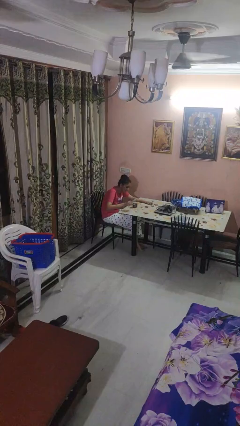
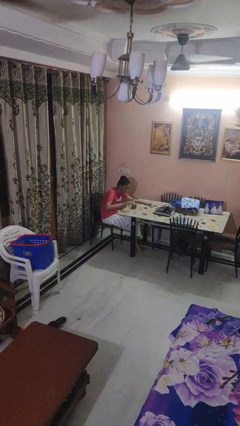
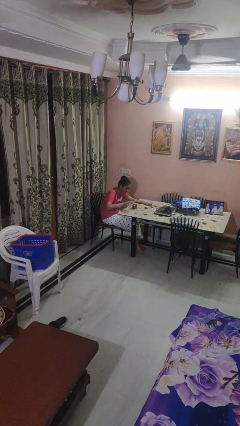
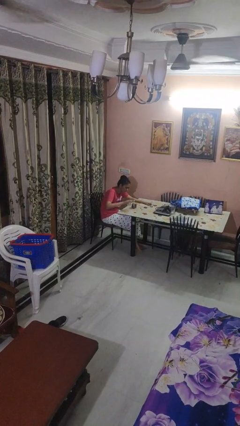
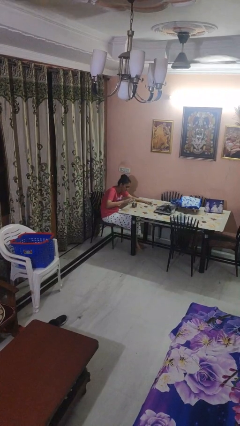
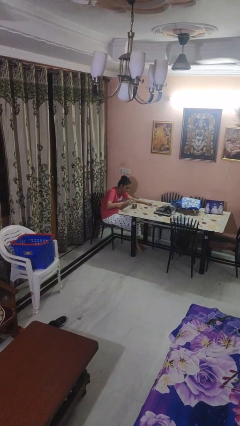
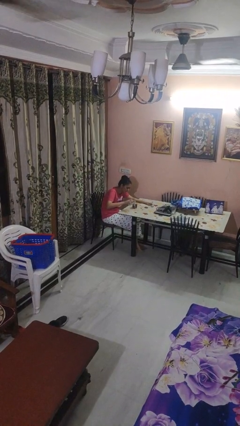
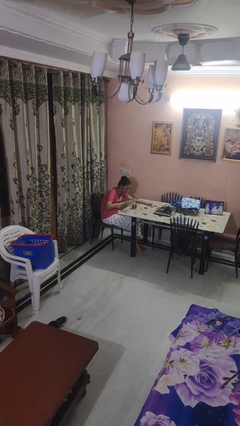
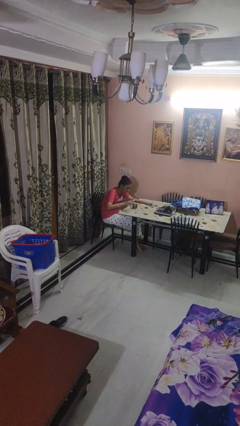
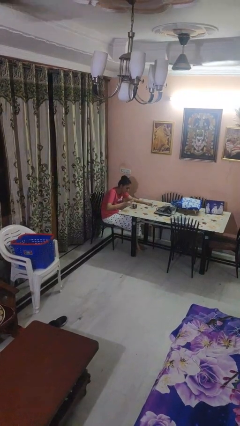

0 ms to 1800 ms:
person pours liquid into cup

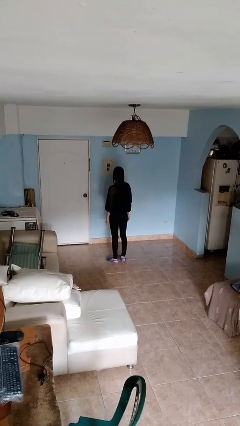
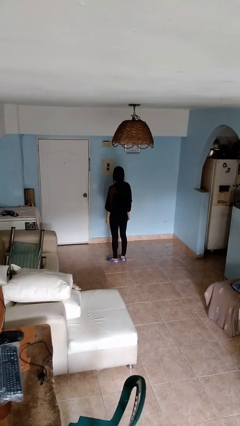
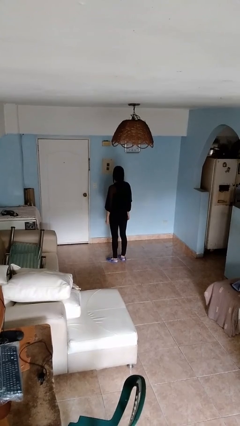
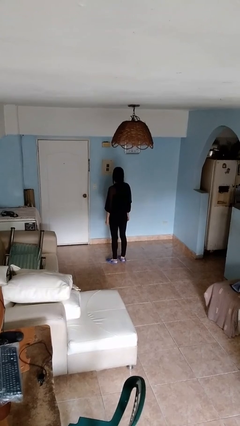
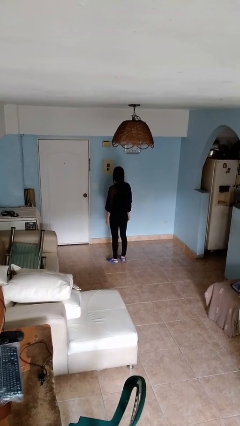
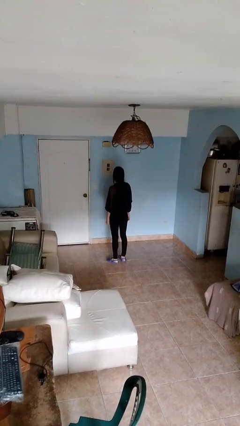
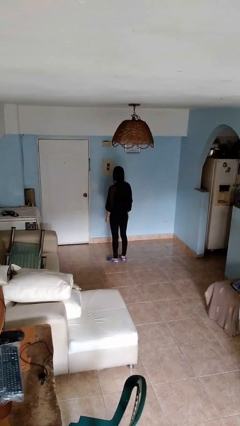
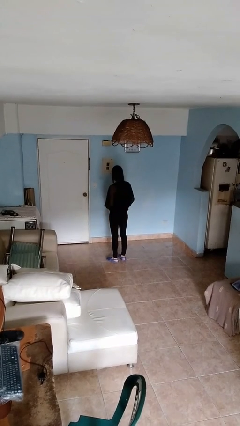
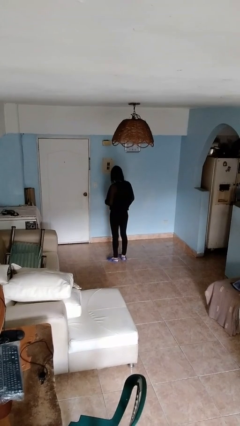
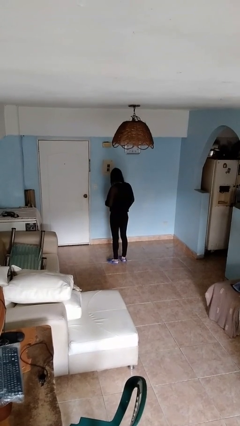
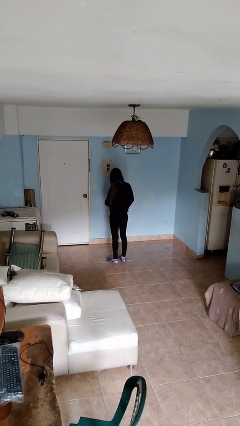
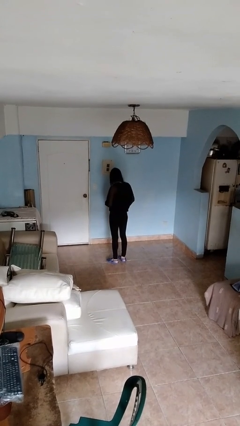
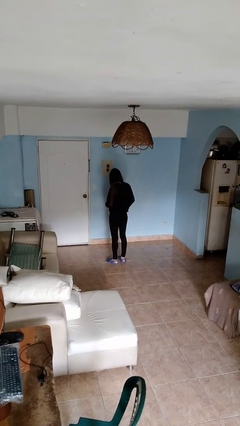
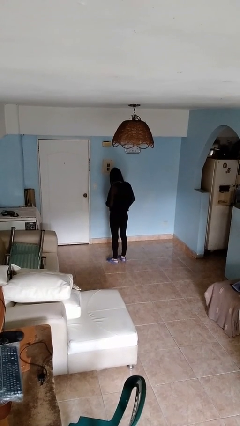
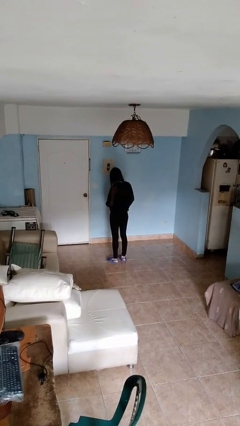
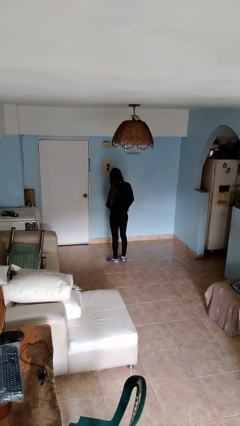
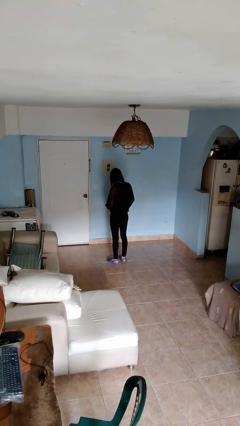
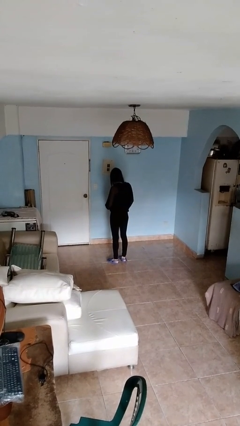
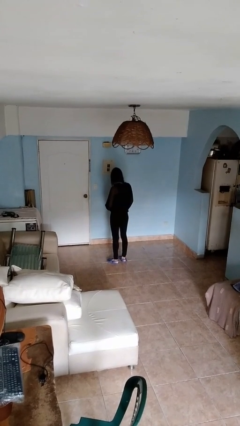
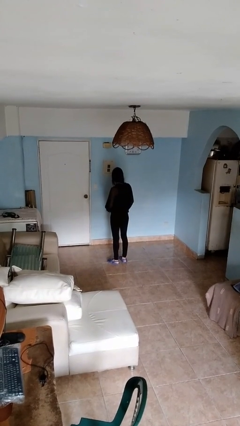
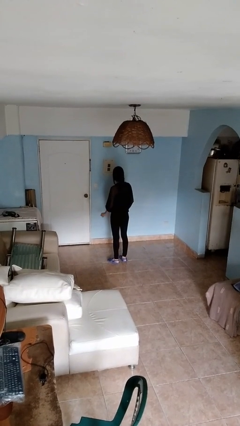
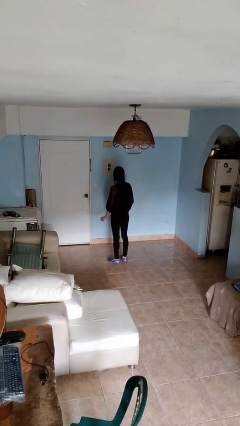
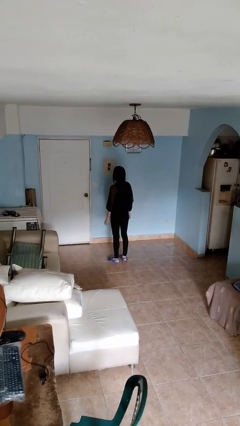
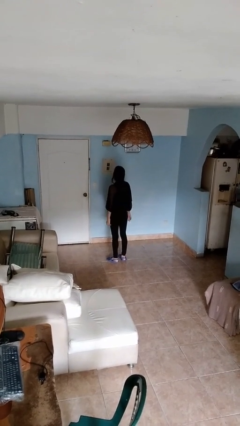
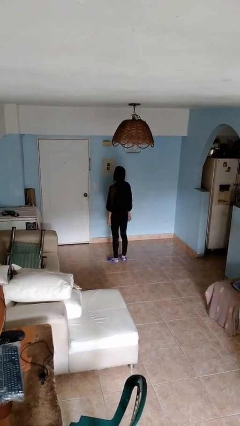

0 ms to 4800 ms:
person buttons shirt

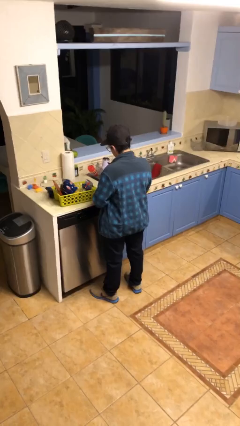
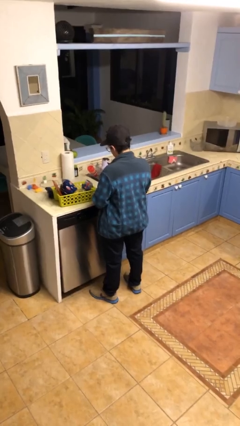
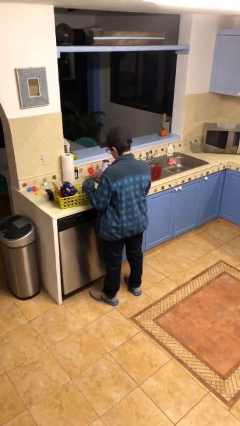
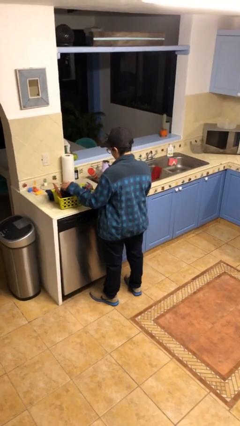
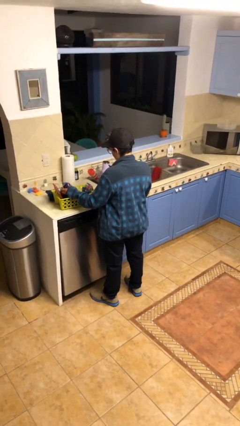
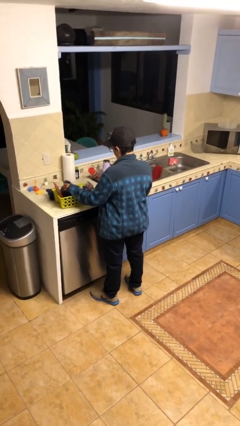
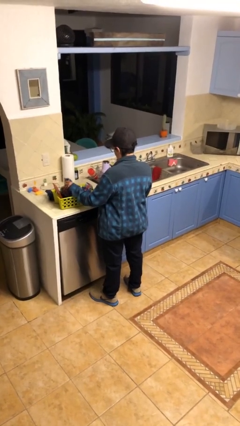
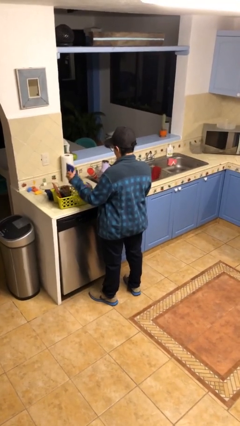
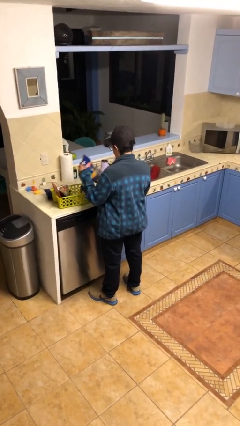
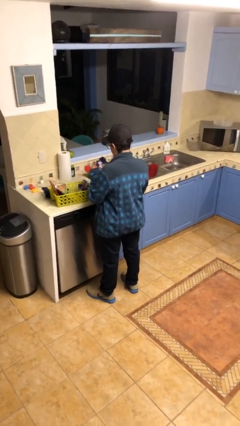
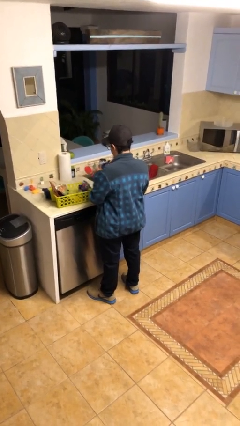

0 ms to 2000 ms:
person takes object from basket

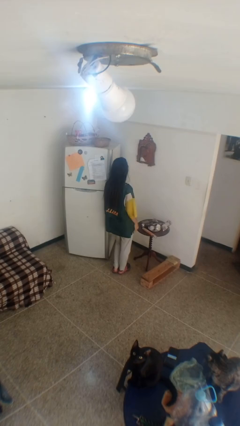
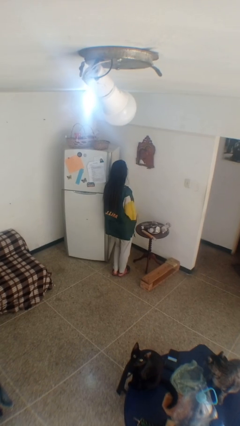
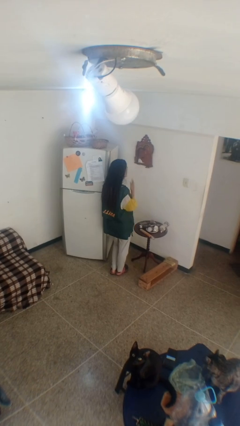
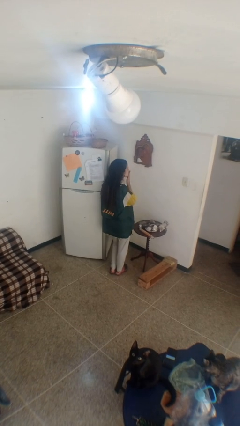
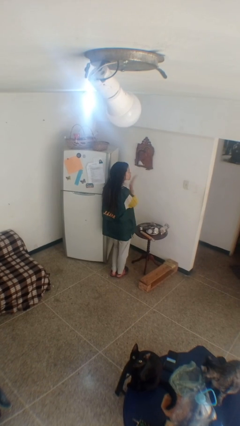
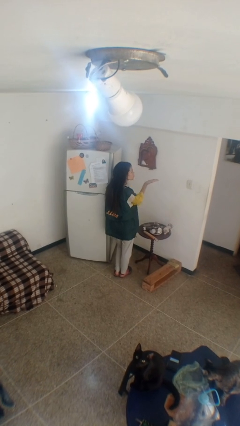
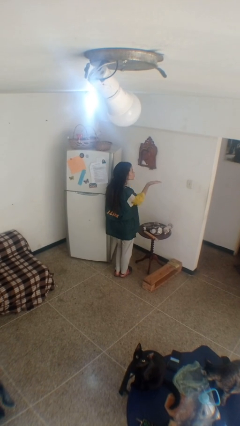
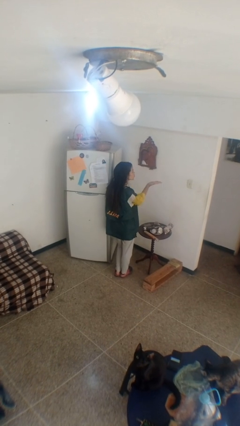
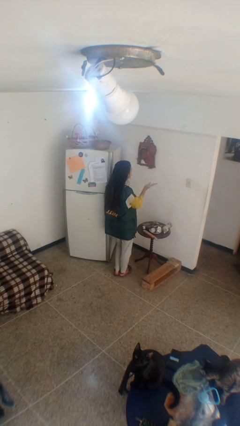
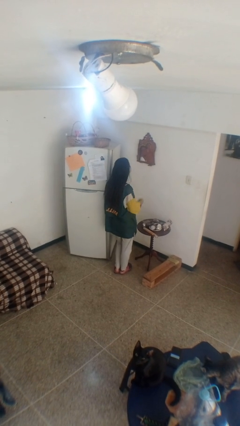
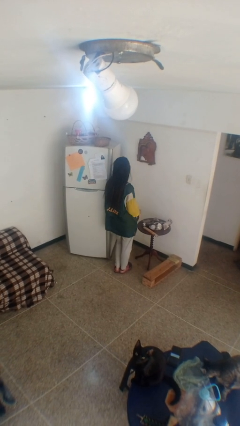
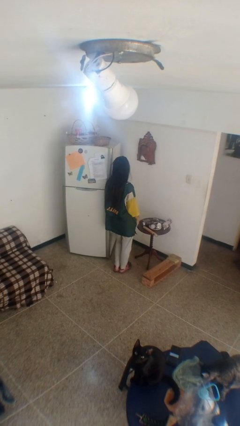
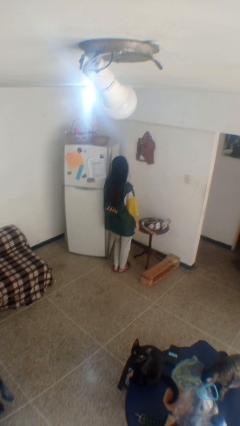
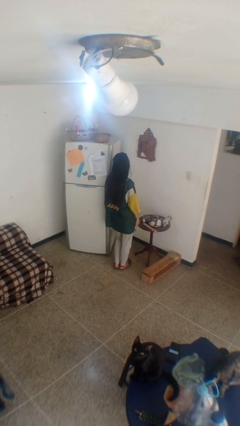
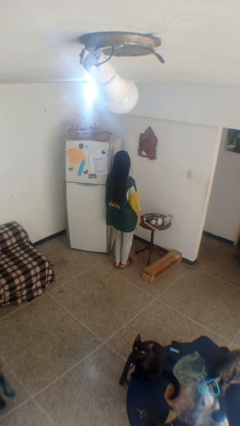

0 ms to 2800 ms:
person gestures blow kiss

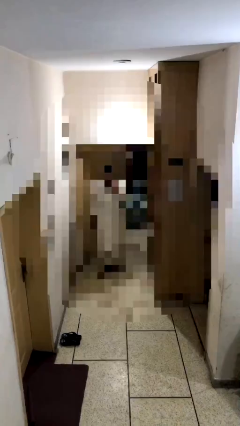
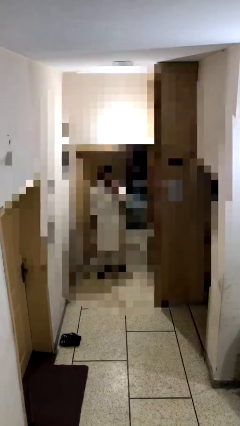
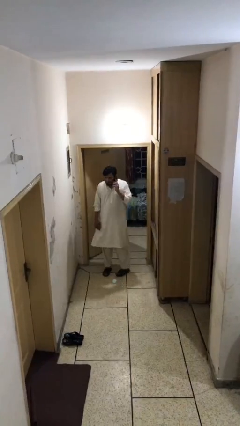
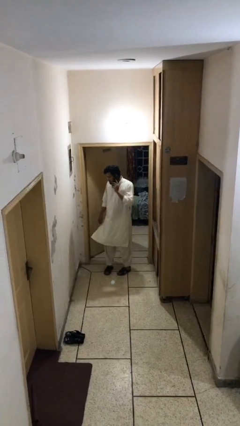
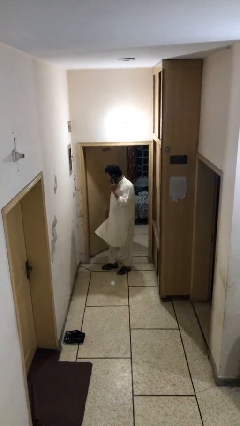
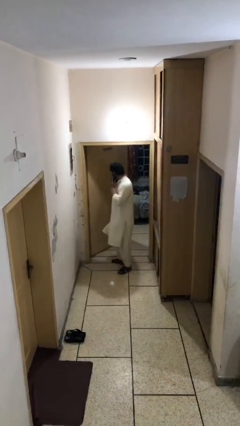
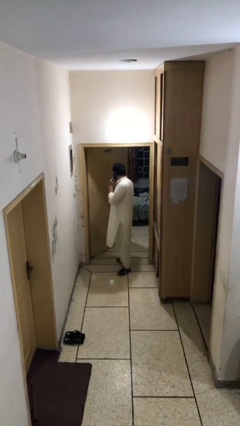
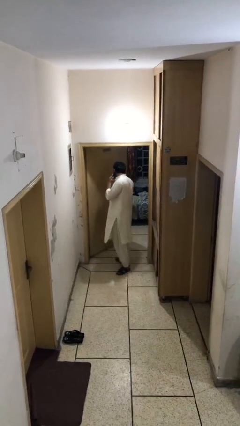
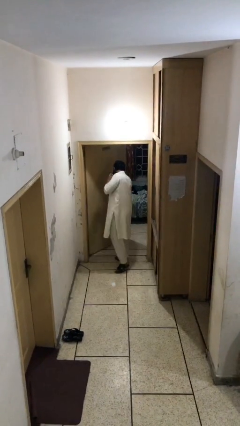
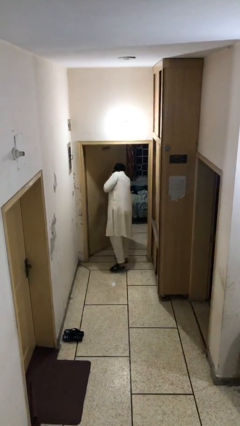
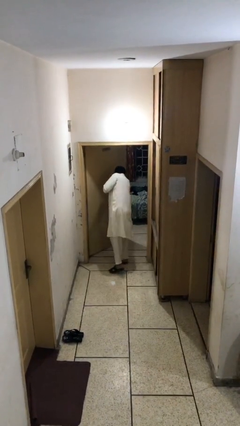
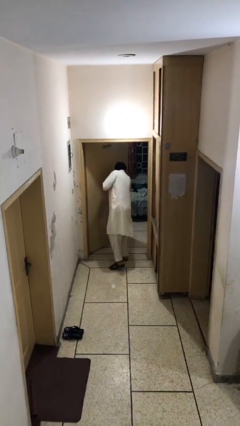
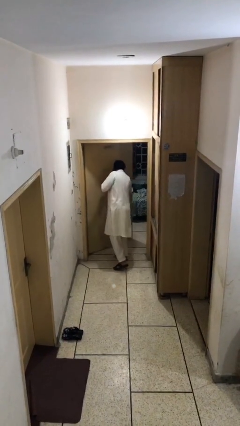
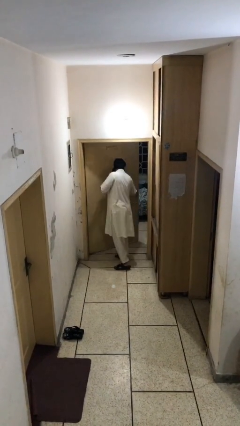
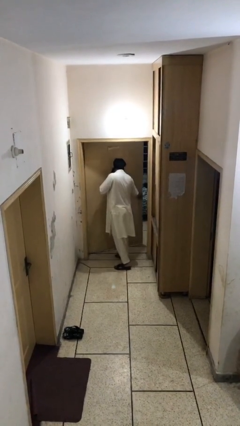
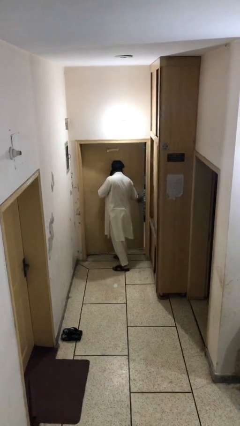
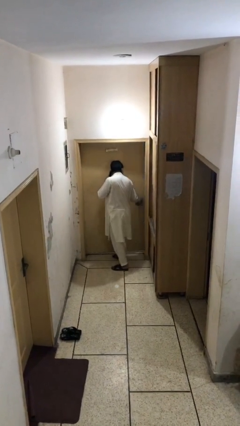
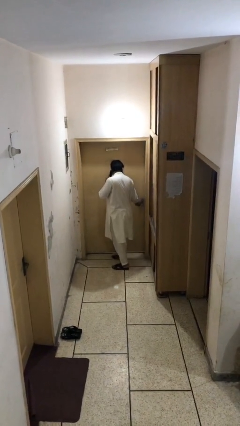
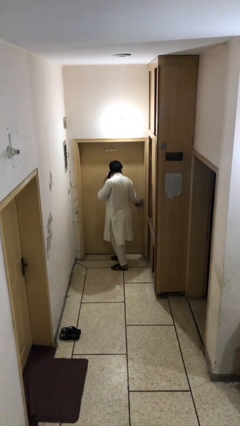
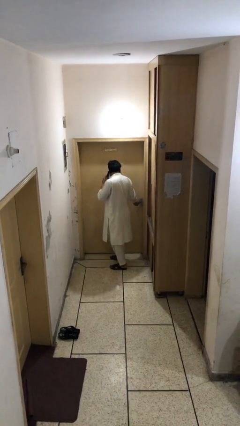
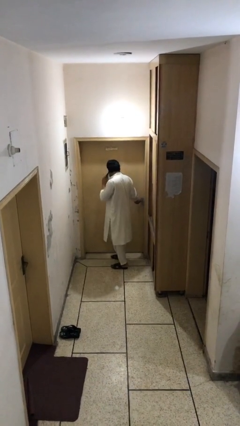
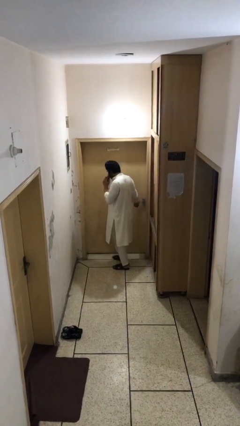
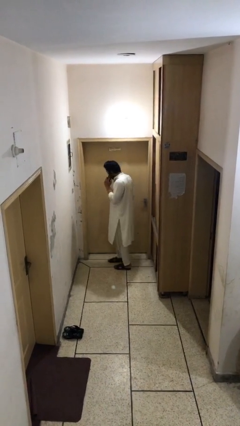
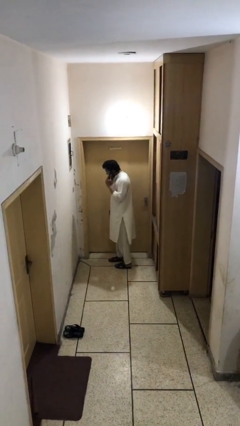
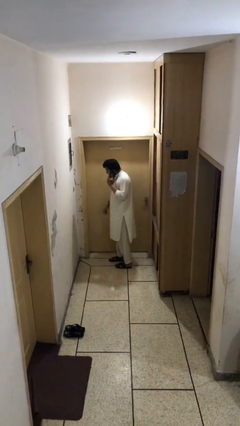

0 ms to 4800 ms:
person closes facility door

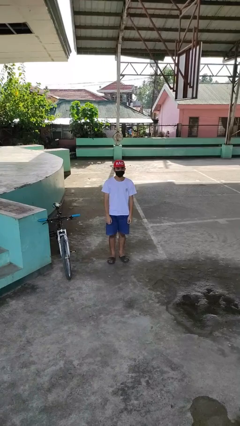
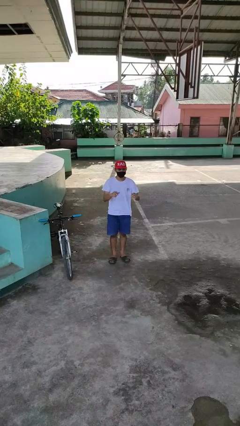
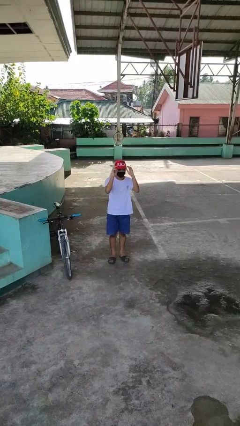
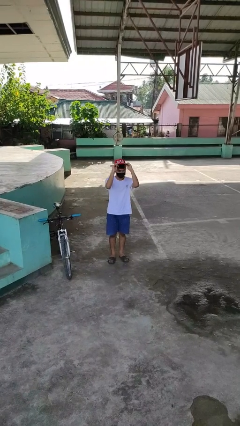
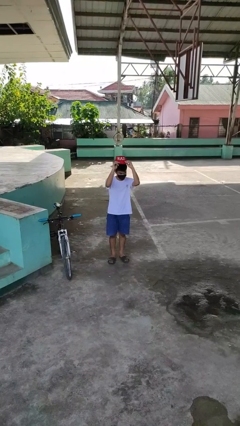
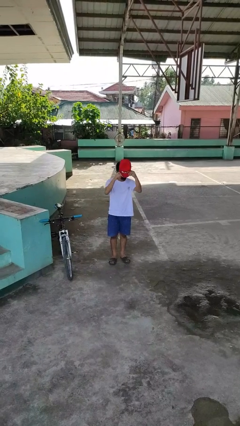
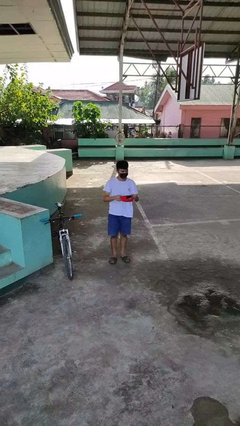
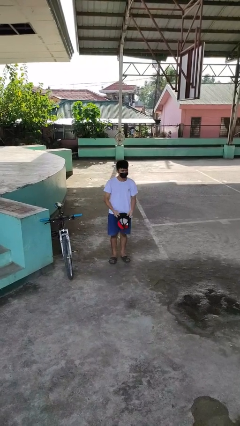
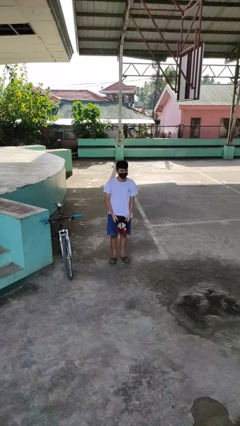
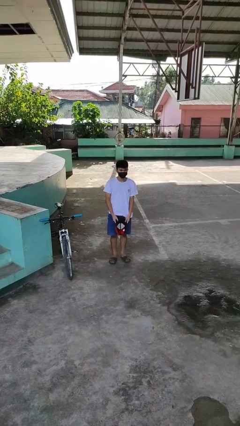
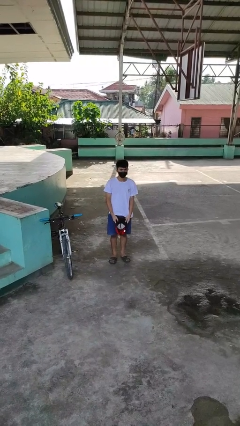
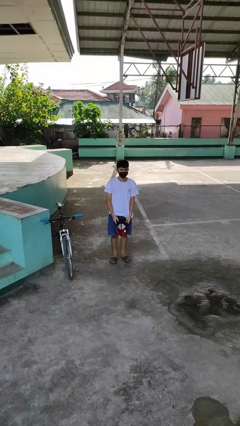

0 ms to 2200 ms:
person takes off hat
